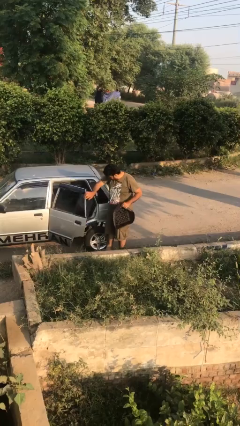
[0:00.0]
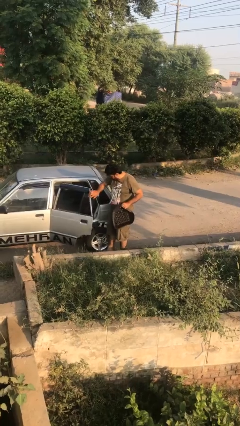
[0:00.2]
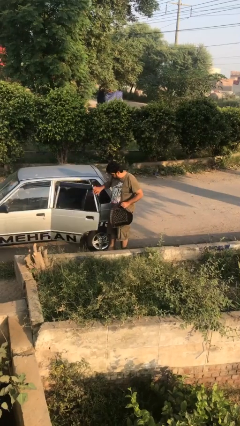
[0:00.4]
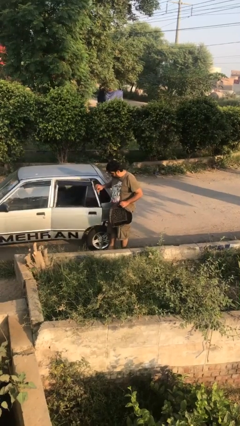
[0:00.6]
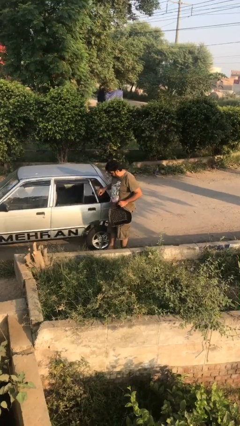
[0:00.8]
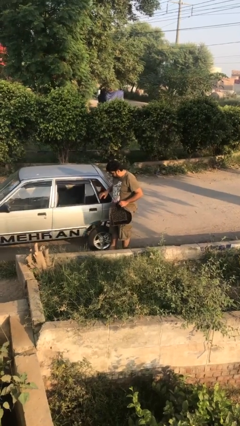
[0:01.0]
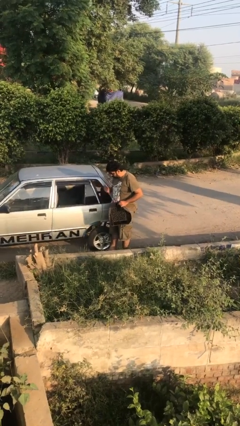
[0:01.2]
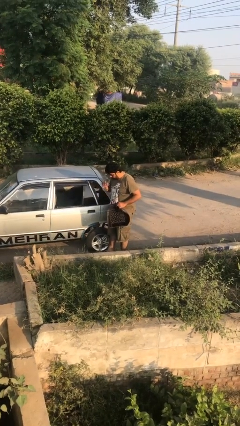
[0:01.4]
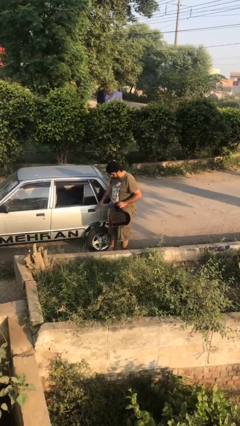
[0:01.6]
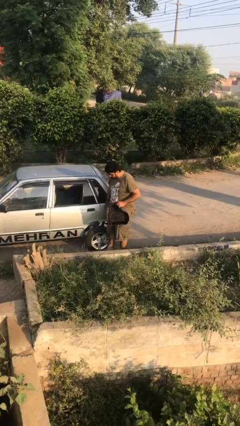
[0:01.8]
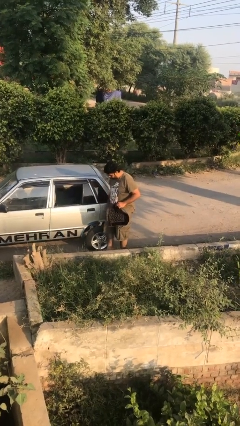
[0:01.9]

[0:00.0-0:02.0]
person closes car door

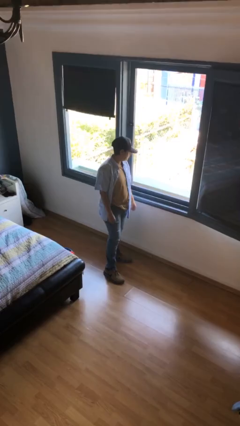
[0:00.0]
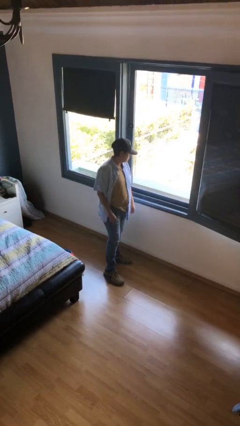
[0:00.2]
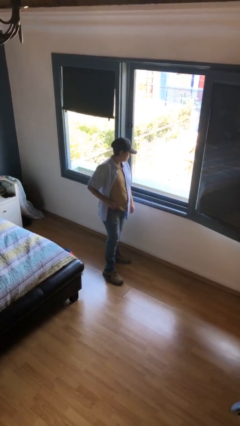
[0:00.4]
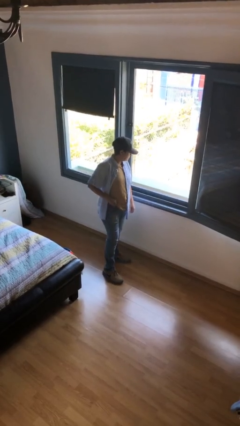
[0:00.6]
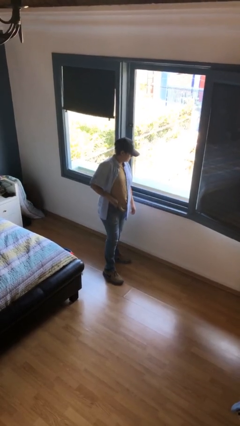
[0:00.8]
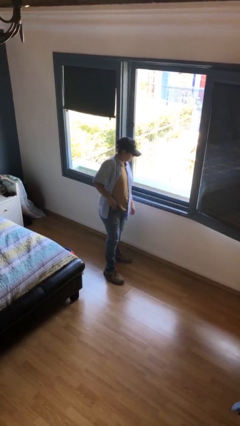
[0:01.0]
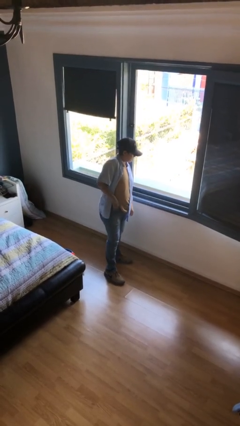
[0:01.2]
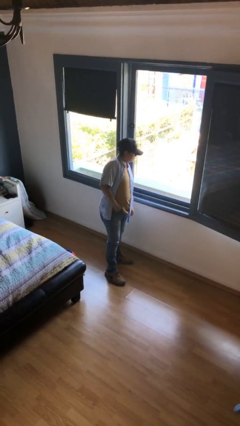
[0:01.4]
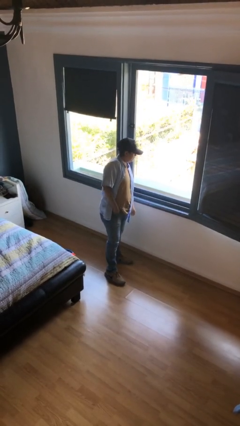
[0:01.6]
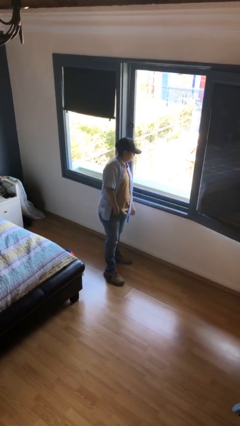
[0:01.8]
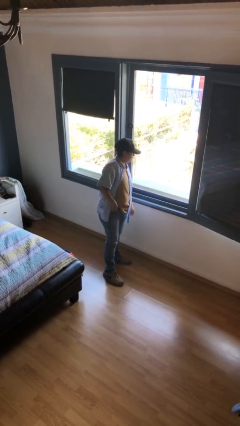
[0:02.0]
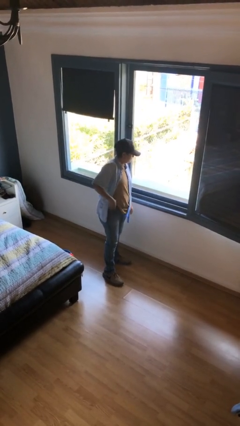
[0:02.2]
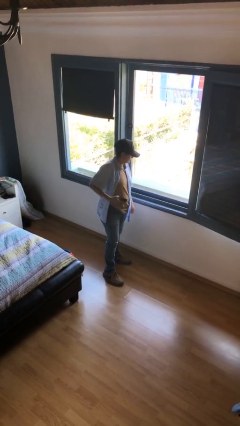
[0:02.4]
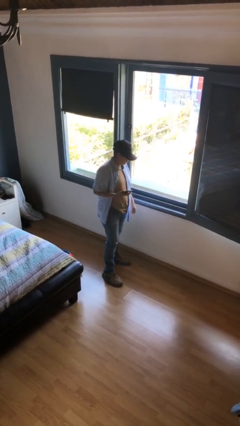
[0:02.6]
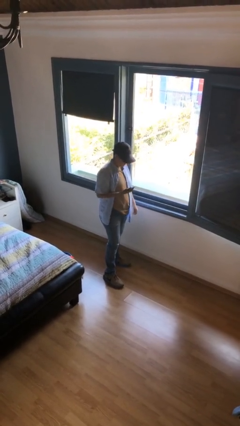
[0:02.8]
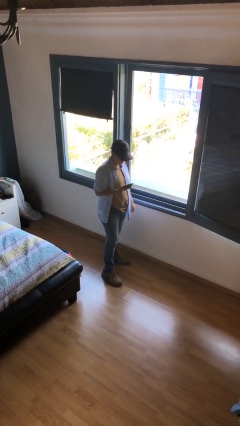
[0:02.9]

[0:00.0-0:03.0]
person takes phone from pocket

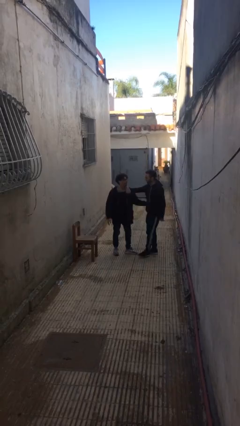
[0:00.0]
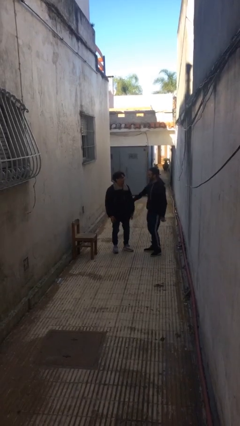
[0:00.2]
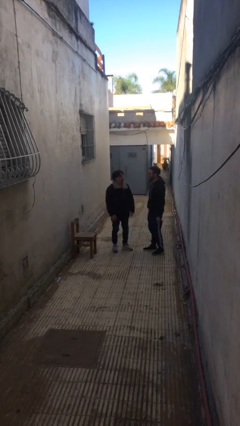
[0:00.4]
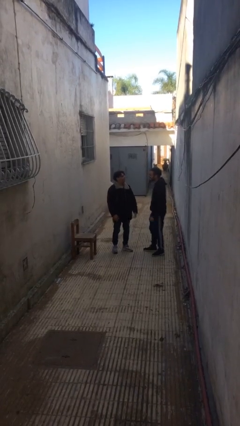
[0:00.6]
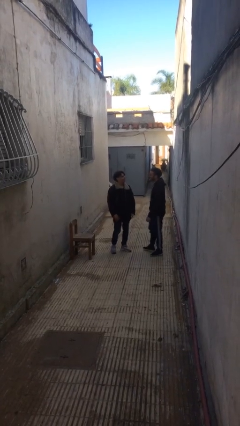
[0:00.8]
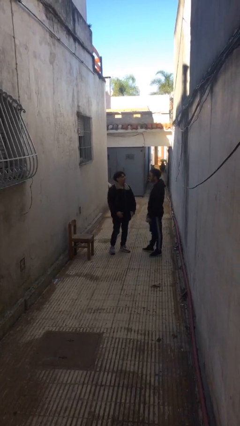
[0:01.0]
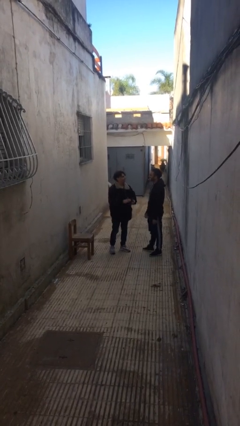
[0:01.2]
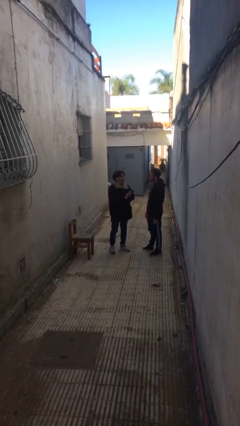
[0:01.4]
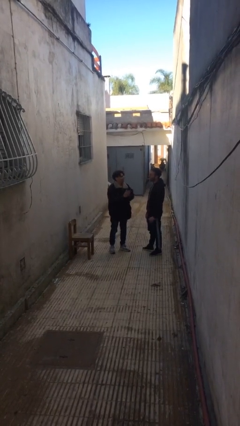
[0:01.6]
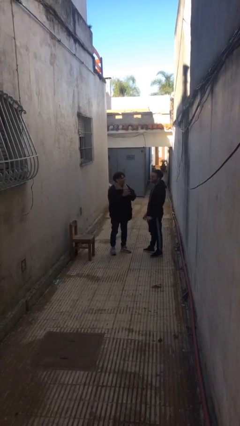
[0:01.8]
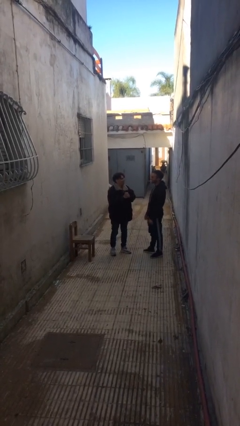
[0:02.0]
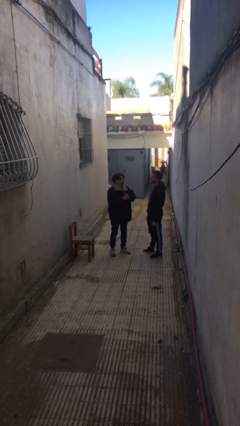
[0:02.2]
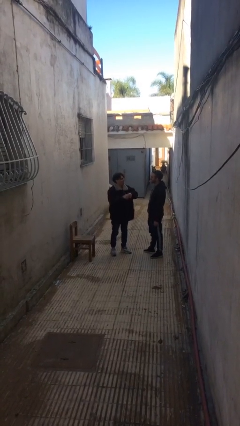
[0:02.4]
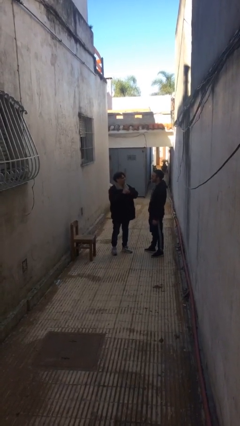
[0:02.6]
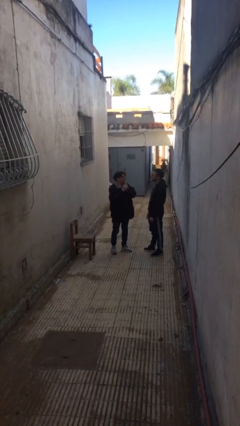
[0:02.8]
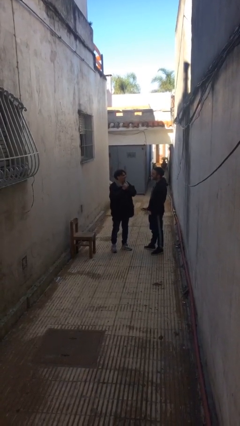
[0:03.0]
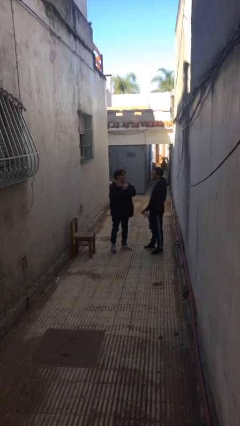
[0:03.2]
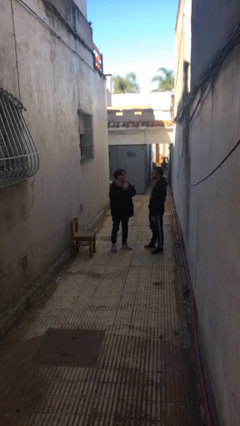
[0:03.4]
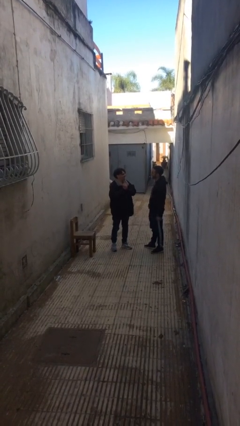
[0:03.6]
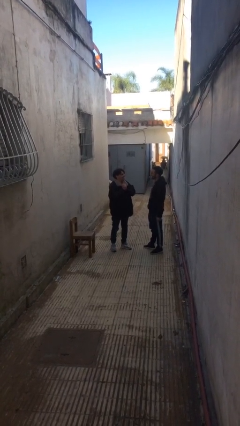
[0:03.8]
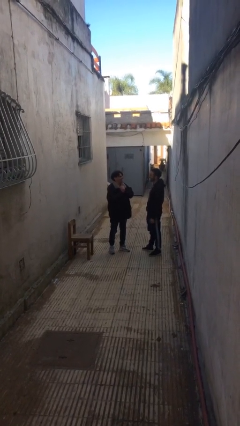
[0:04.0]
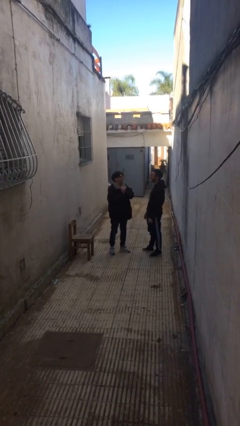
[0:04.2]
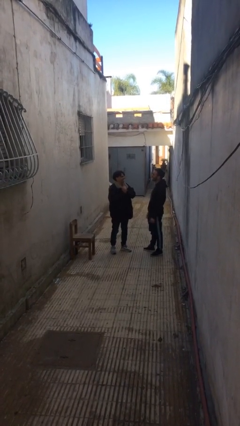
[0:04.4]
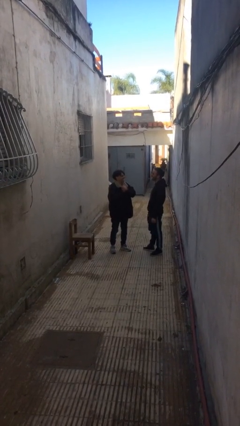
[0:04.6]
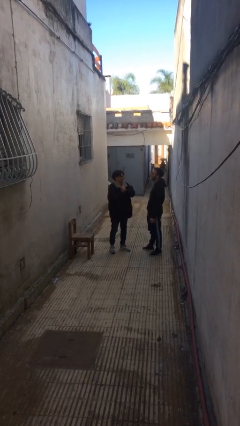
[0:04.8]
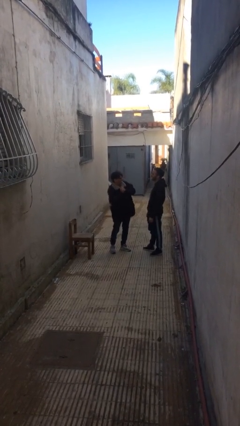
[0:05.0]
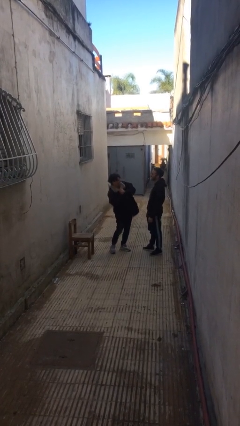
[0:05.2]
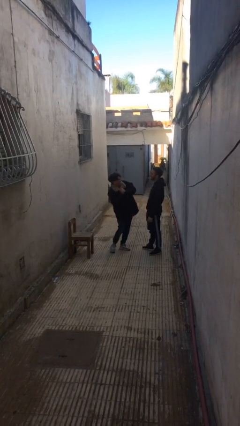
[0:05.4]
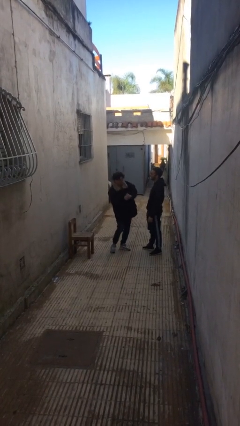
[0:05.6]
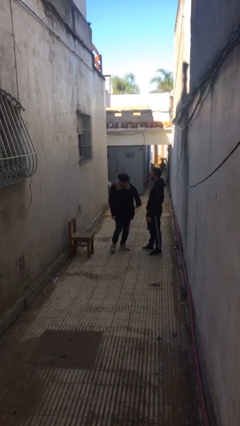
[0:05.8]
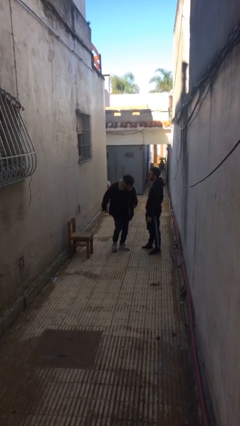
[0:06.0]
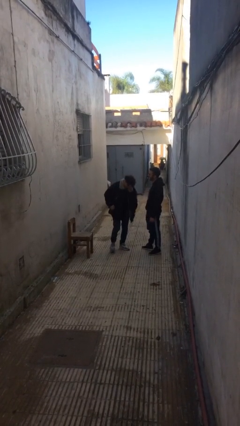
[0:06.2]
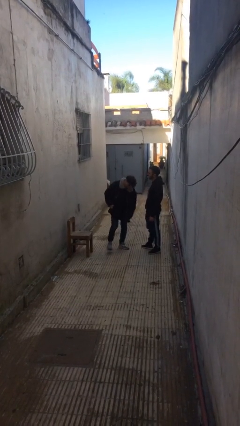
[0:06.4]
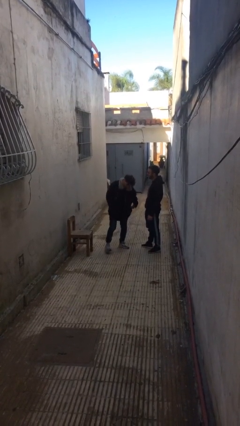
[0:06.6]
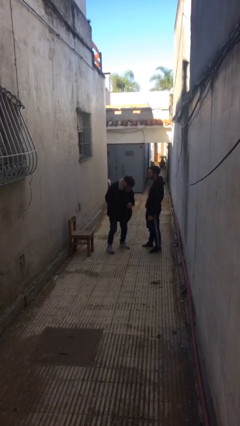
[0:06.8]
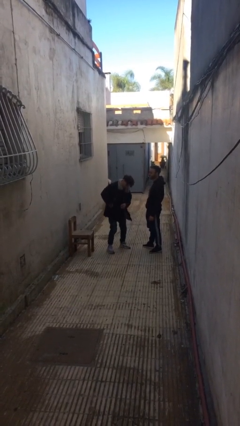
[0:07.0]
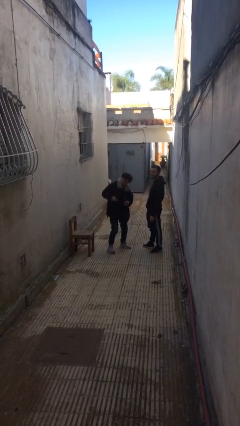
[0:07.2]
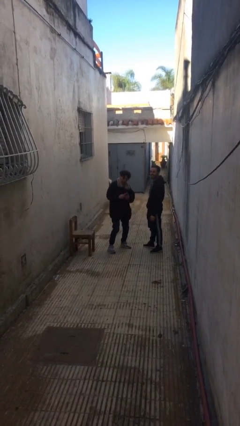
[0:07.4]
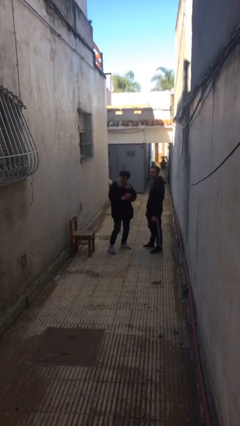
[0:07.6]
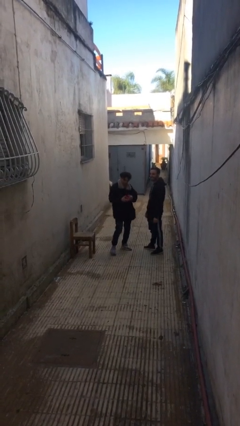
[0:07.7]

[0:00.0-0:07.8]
person talks to person

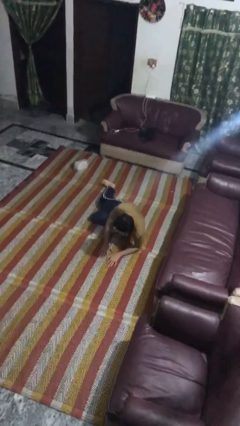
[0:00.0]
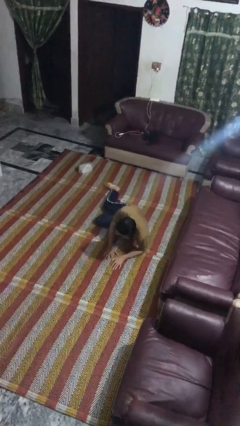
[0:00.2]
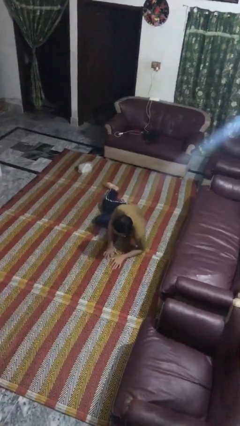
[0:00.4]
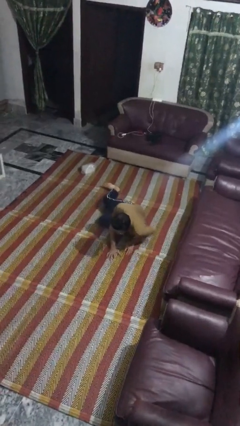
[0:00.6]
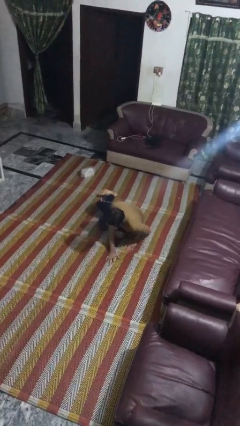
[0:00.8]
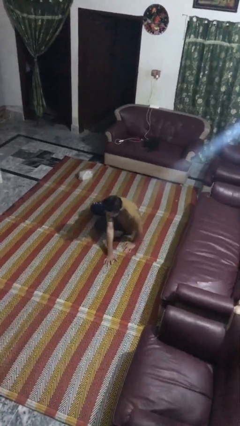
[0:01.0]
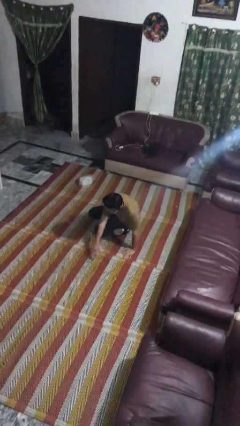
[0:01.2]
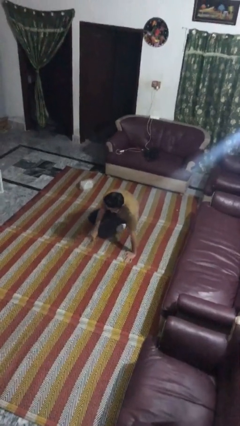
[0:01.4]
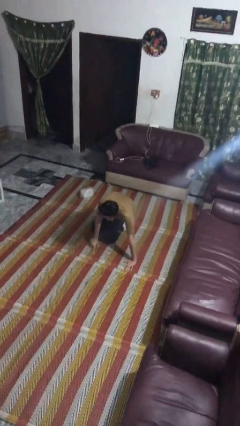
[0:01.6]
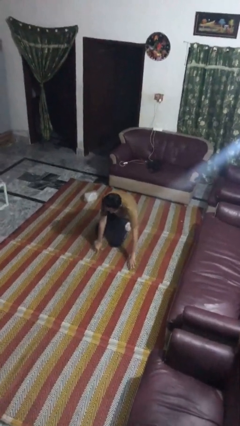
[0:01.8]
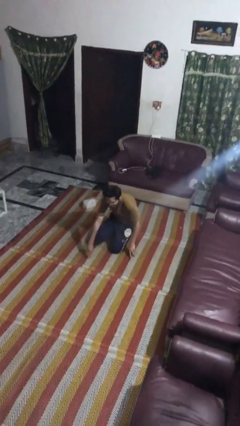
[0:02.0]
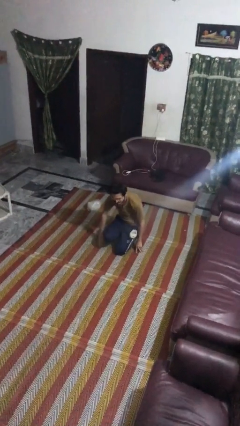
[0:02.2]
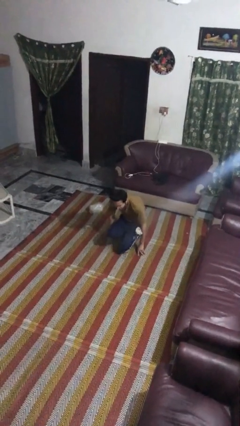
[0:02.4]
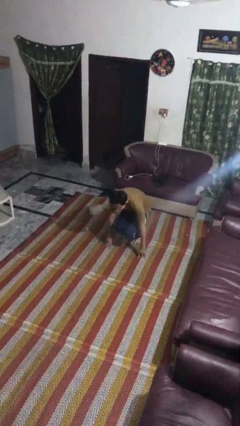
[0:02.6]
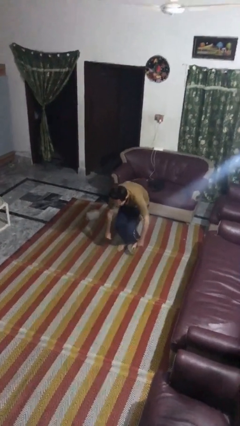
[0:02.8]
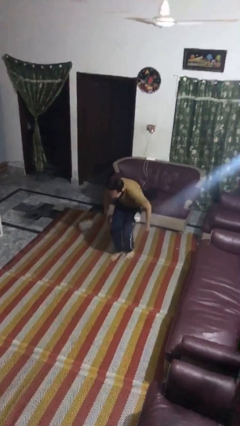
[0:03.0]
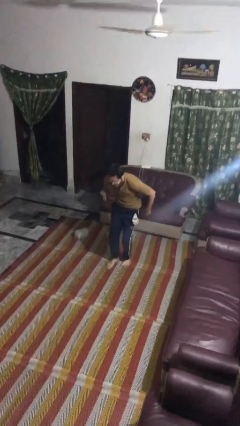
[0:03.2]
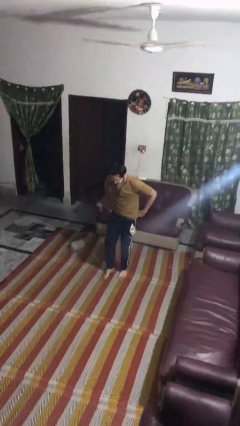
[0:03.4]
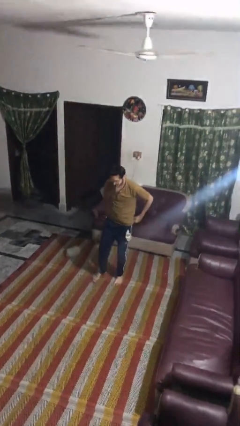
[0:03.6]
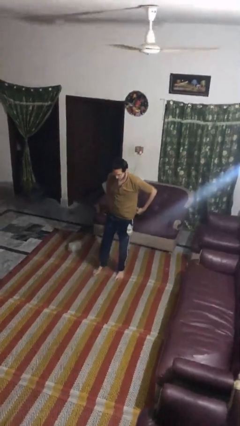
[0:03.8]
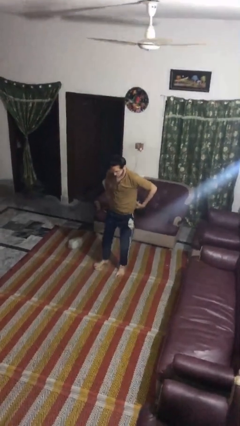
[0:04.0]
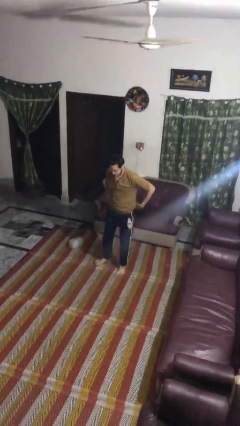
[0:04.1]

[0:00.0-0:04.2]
person stands up from floor

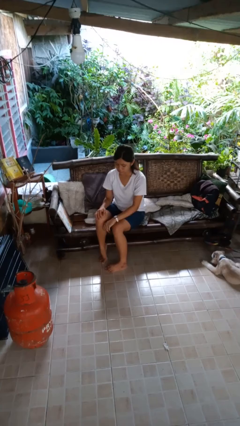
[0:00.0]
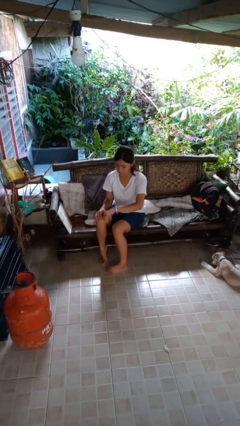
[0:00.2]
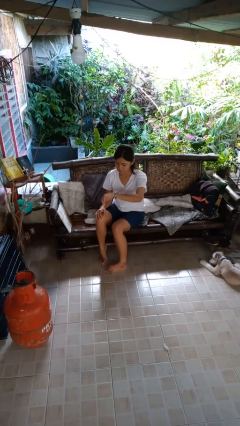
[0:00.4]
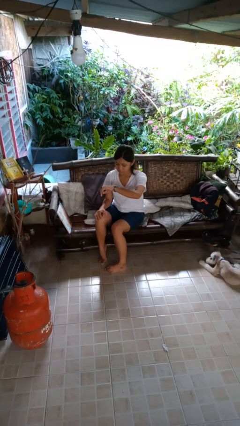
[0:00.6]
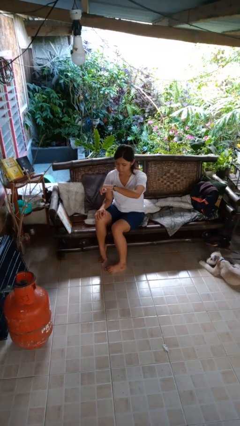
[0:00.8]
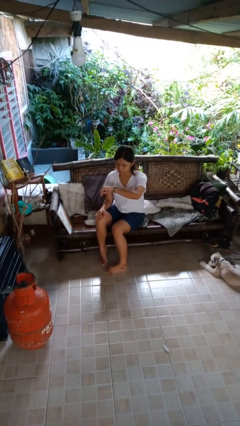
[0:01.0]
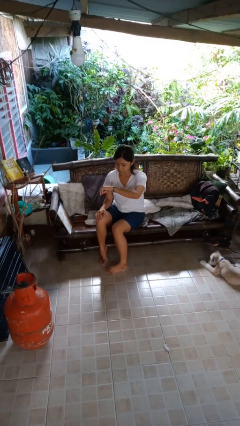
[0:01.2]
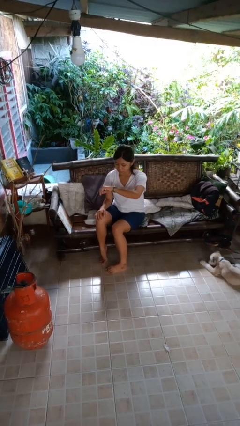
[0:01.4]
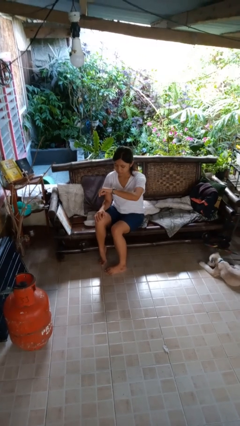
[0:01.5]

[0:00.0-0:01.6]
person looks at wristwatch
